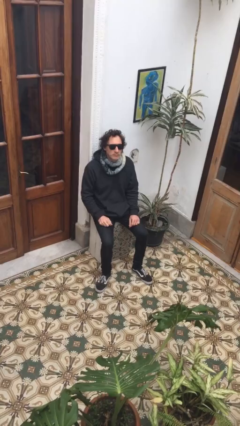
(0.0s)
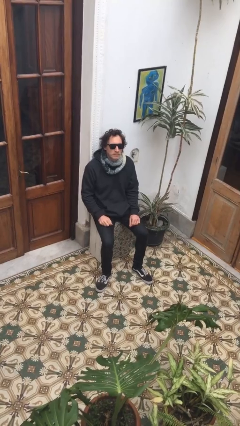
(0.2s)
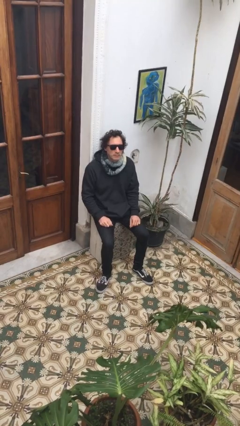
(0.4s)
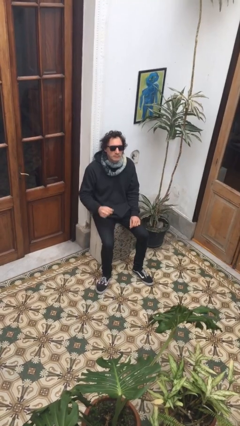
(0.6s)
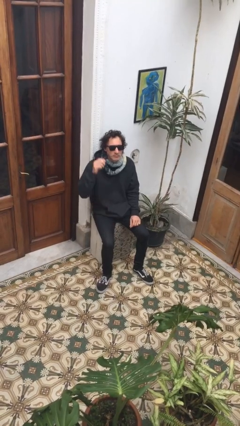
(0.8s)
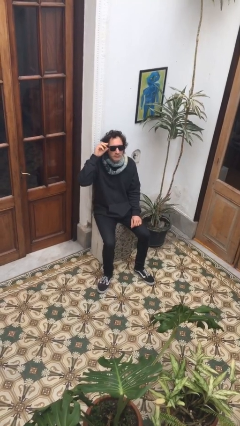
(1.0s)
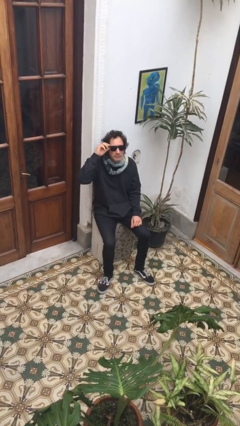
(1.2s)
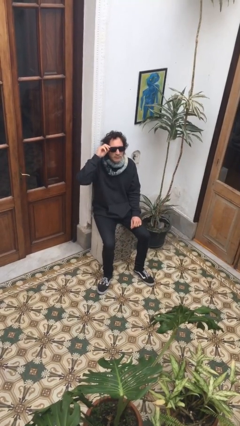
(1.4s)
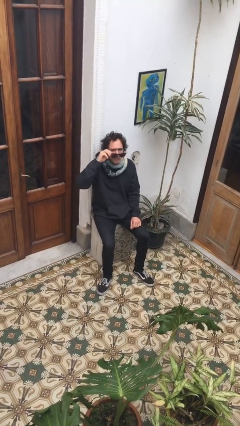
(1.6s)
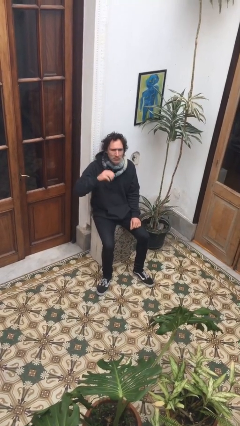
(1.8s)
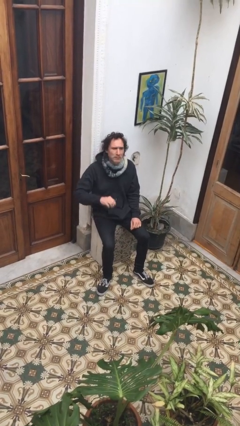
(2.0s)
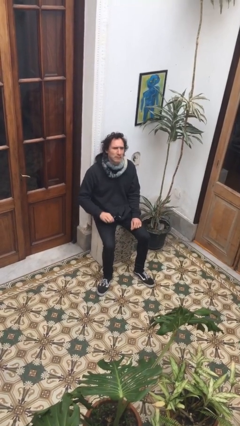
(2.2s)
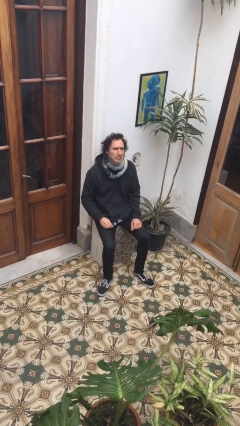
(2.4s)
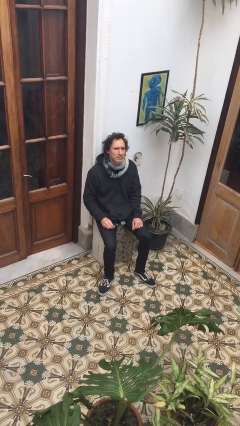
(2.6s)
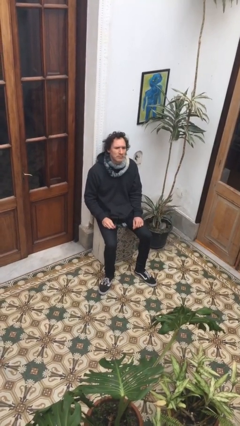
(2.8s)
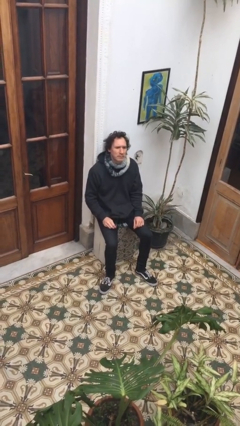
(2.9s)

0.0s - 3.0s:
person takes off sunglasses

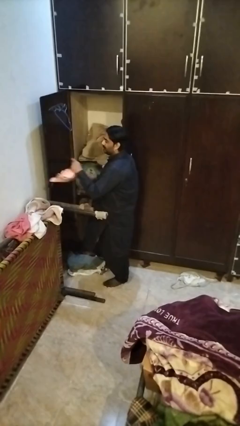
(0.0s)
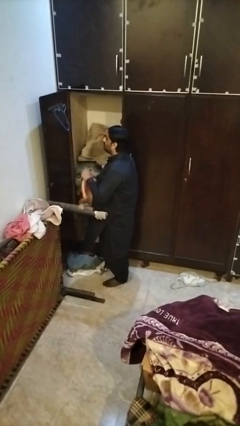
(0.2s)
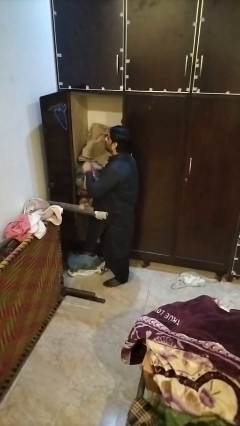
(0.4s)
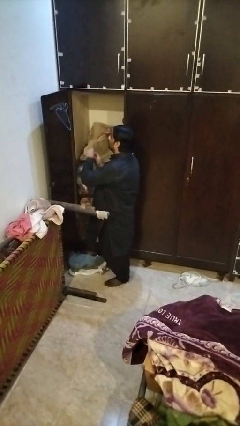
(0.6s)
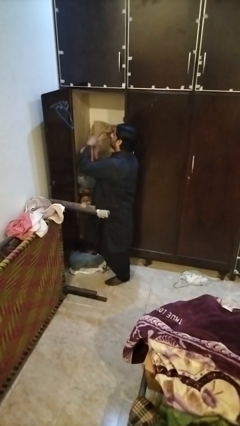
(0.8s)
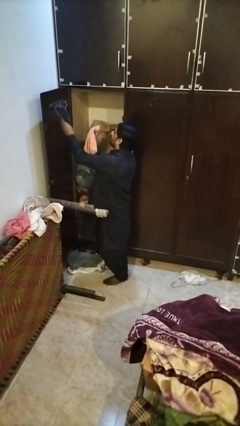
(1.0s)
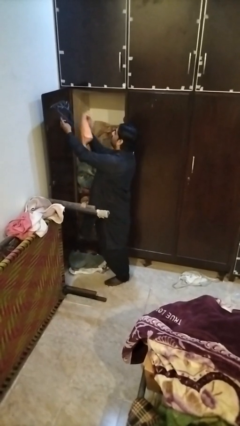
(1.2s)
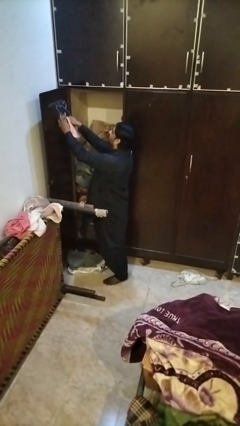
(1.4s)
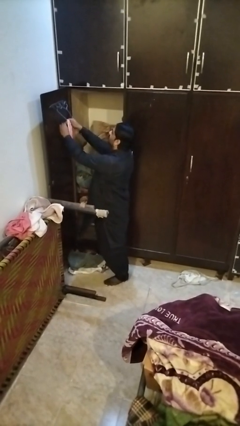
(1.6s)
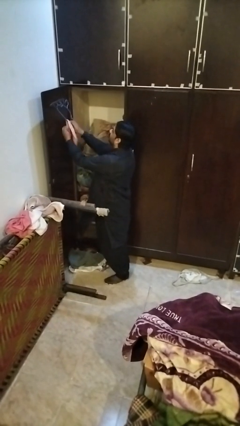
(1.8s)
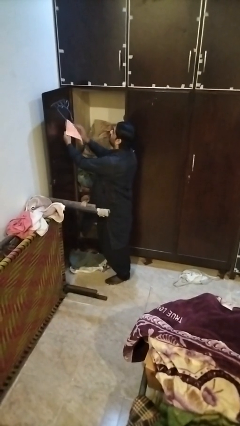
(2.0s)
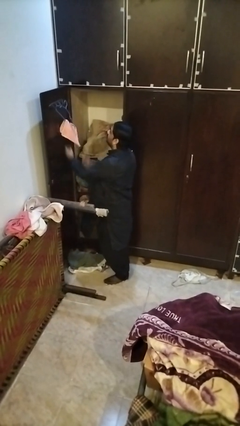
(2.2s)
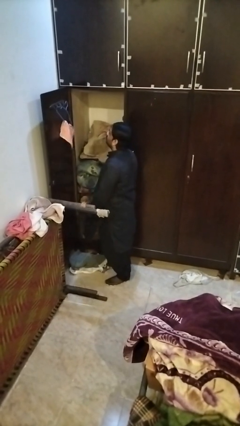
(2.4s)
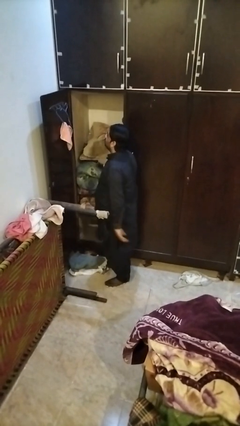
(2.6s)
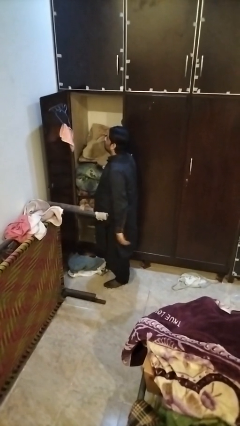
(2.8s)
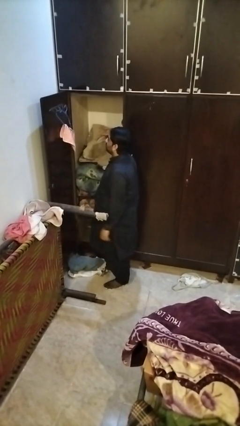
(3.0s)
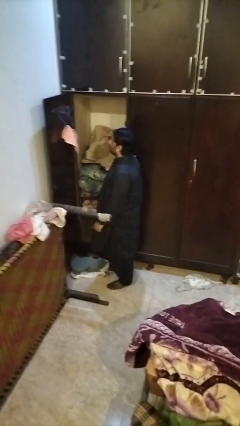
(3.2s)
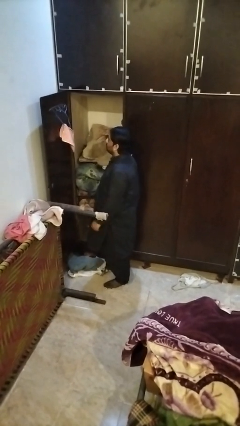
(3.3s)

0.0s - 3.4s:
person puts clothes into closet

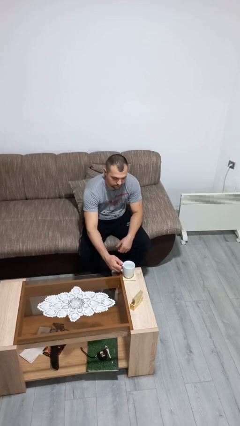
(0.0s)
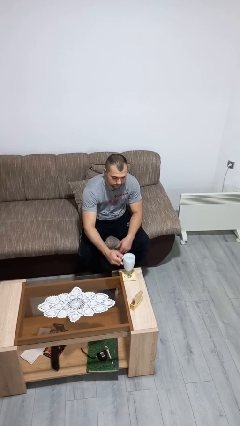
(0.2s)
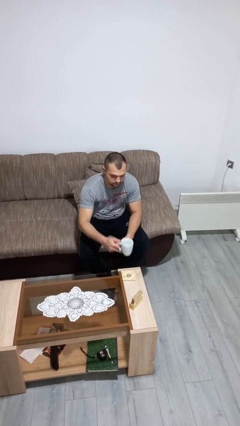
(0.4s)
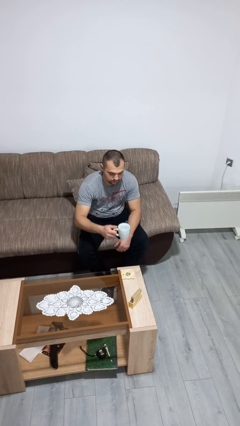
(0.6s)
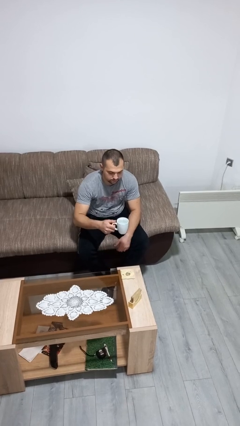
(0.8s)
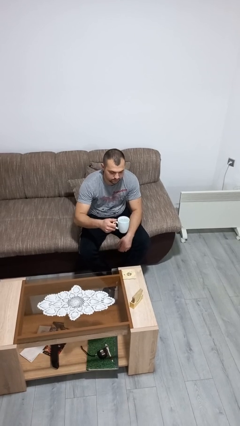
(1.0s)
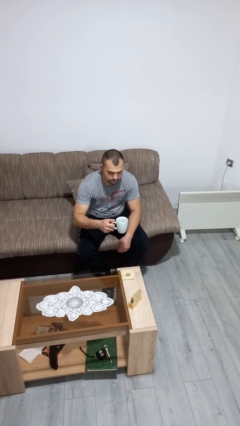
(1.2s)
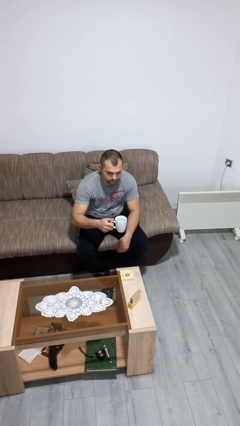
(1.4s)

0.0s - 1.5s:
person picks up object from table

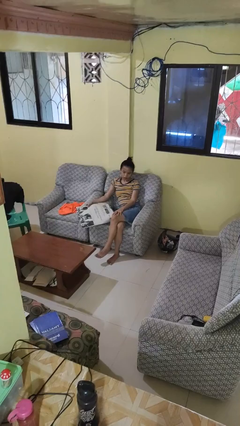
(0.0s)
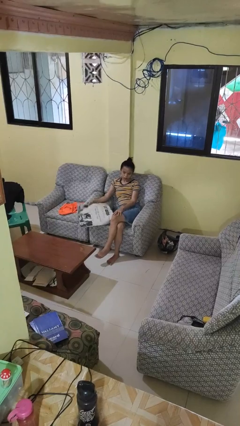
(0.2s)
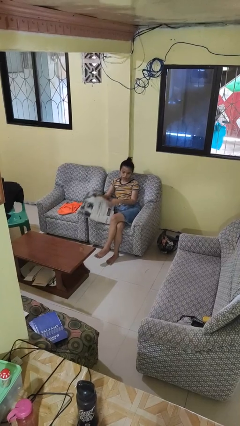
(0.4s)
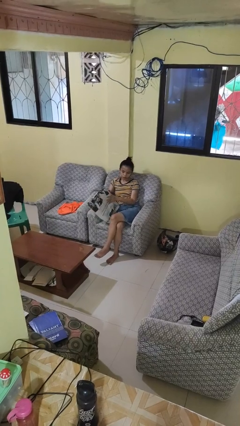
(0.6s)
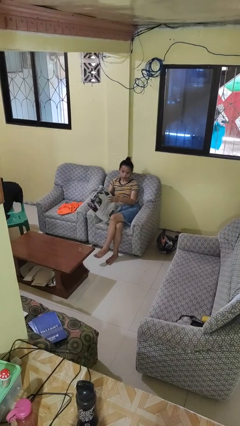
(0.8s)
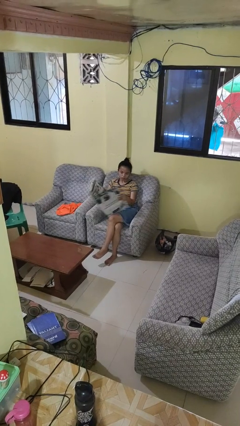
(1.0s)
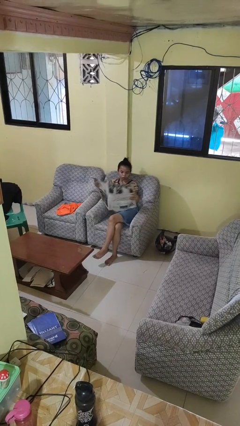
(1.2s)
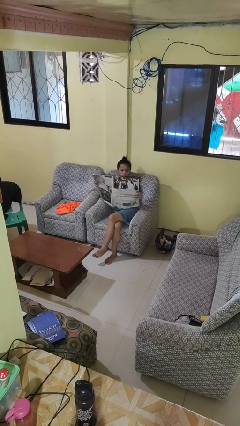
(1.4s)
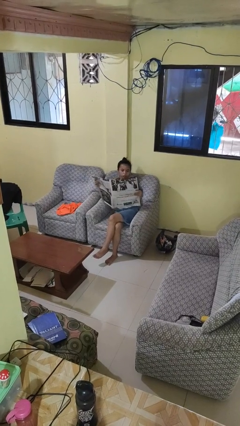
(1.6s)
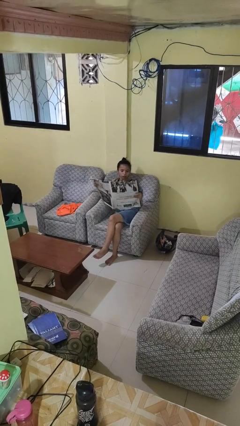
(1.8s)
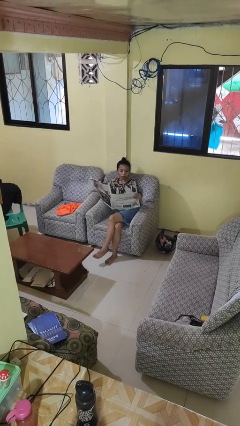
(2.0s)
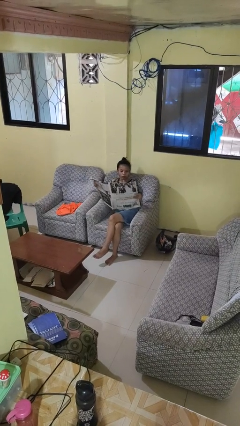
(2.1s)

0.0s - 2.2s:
person reads newspaper

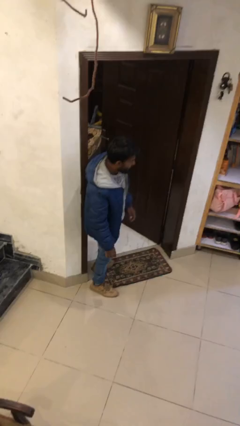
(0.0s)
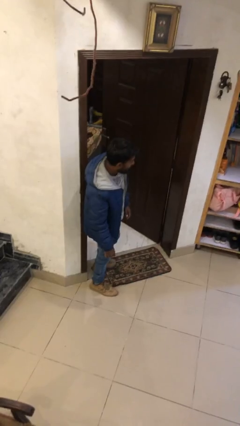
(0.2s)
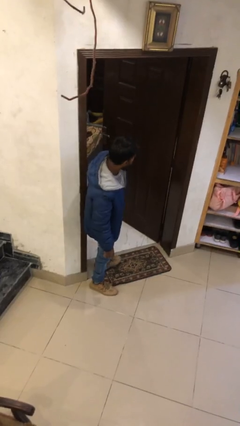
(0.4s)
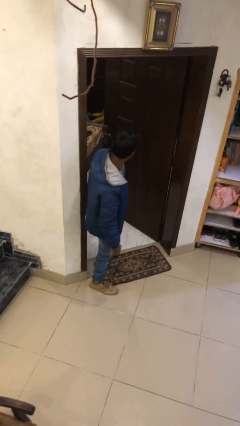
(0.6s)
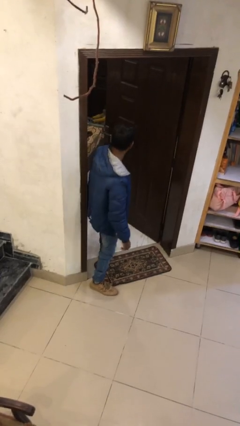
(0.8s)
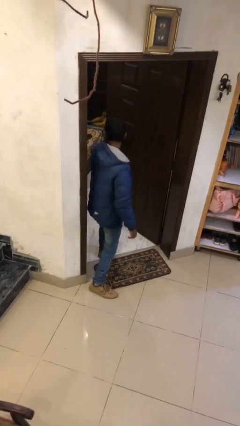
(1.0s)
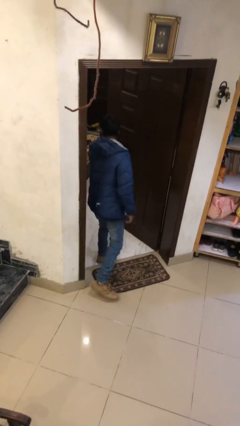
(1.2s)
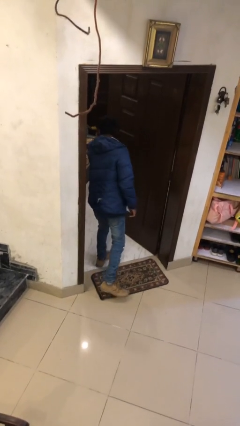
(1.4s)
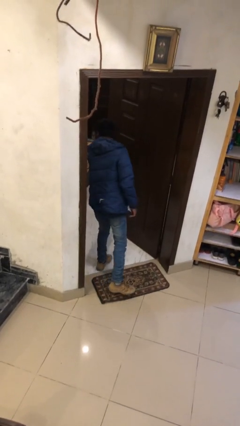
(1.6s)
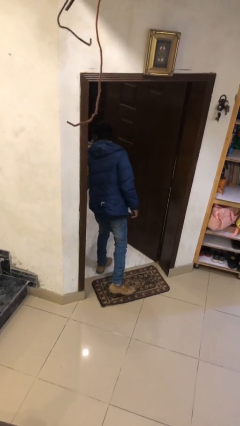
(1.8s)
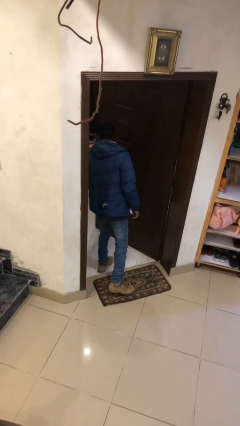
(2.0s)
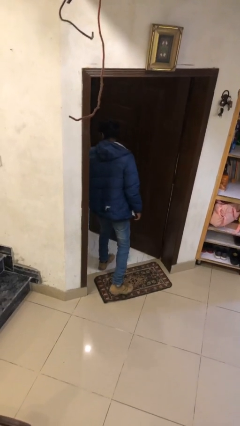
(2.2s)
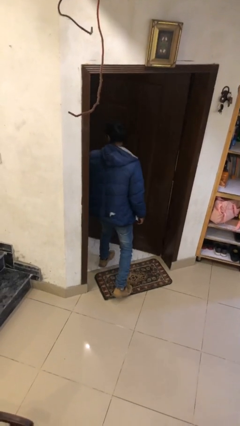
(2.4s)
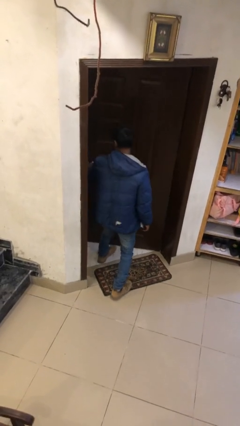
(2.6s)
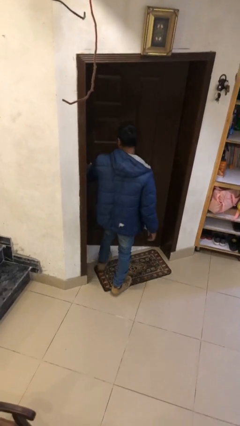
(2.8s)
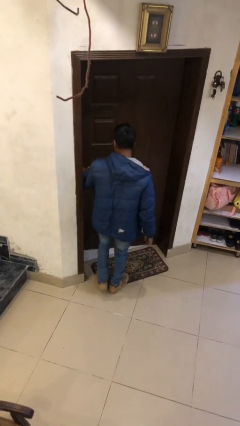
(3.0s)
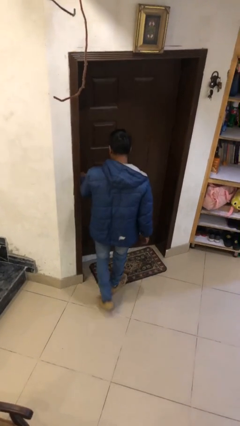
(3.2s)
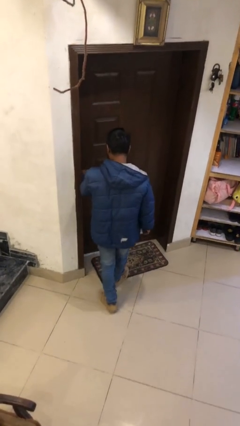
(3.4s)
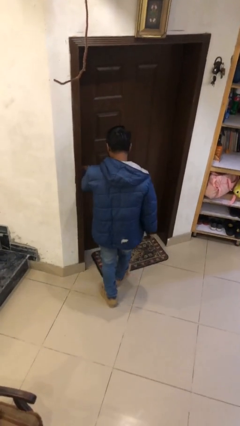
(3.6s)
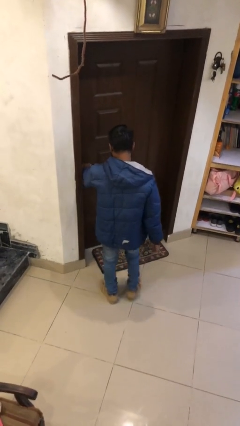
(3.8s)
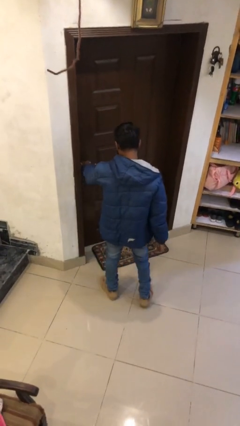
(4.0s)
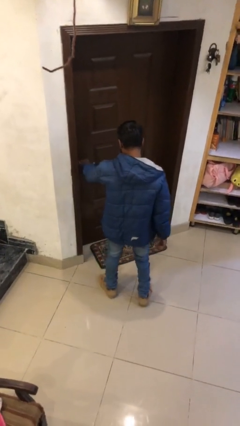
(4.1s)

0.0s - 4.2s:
person closes facility door

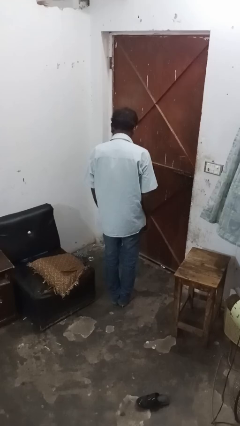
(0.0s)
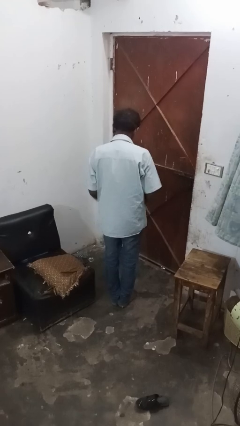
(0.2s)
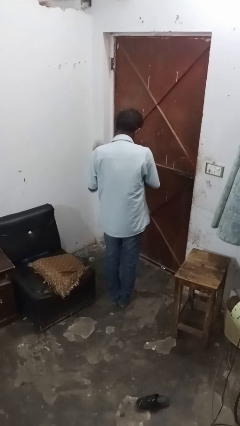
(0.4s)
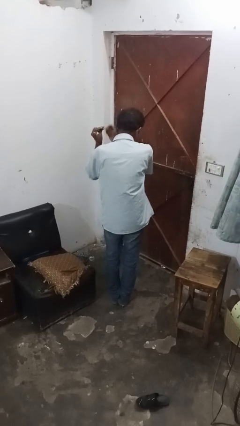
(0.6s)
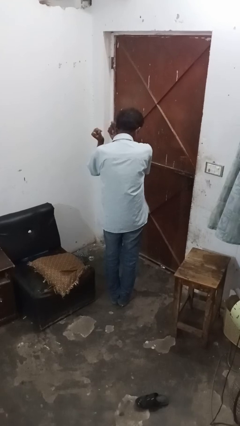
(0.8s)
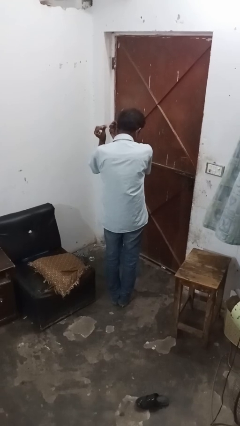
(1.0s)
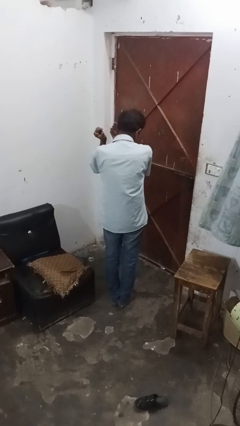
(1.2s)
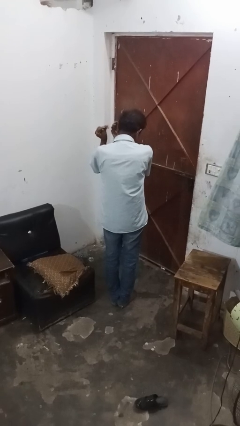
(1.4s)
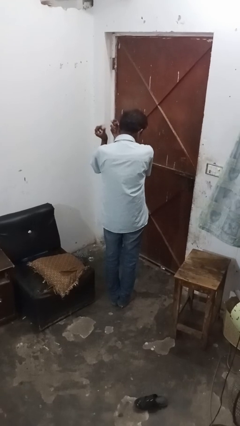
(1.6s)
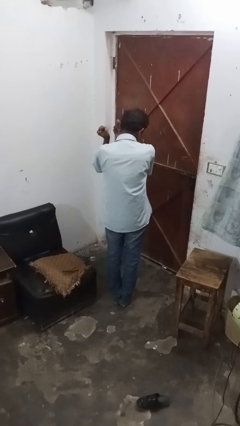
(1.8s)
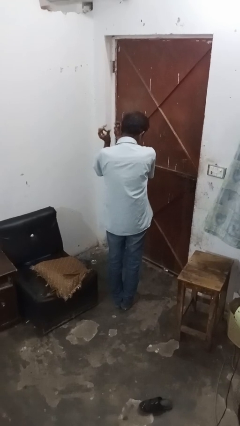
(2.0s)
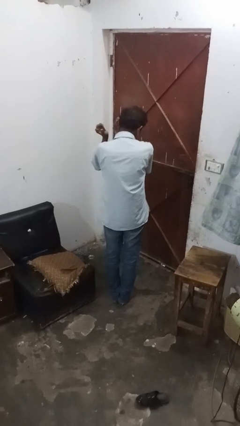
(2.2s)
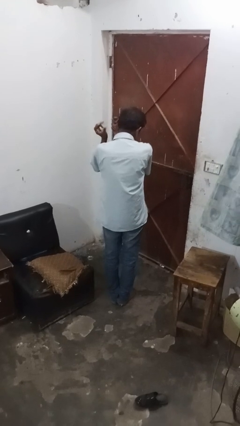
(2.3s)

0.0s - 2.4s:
person snaps fingers

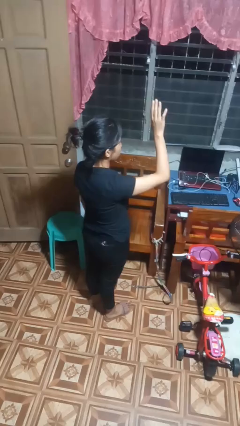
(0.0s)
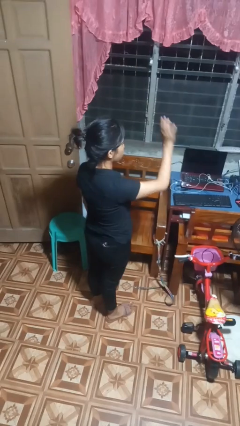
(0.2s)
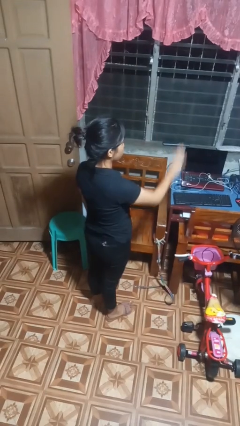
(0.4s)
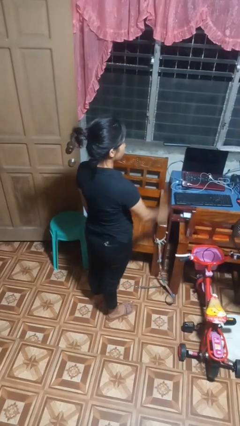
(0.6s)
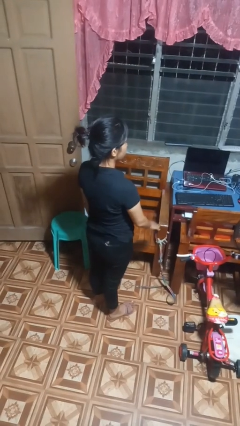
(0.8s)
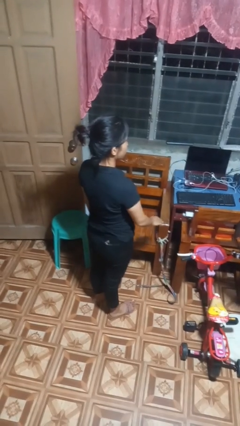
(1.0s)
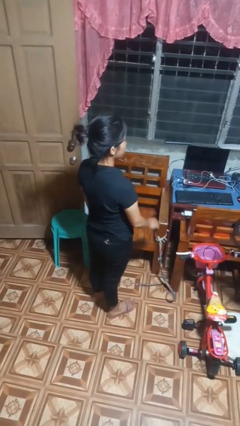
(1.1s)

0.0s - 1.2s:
person gestures swipe down
